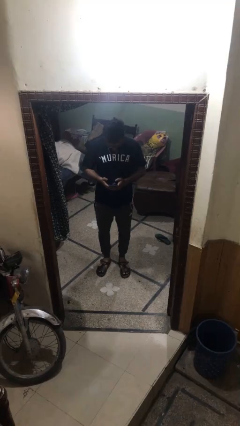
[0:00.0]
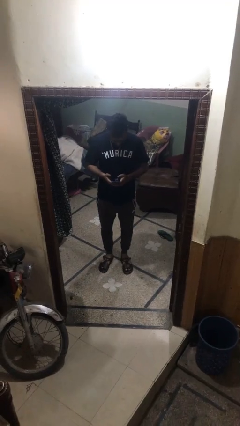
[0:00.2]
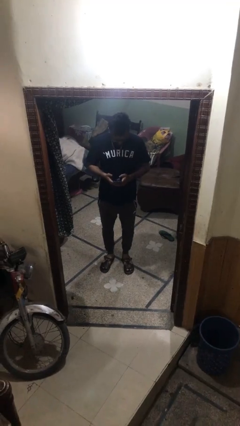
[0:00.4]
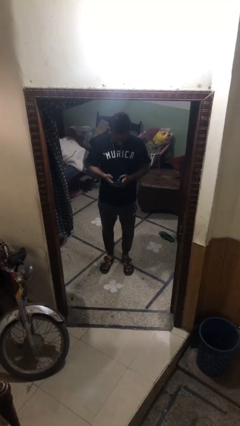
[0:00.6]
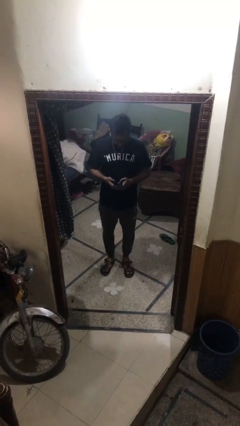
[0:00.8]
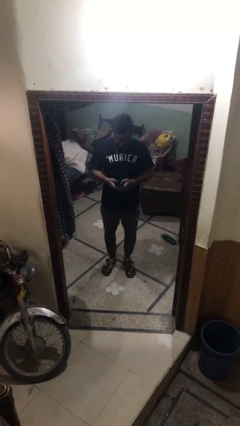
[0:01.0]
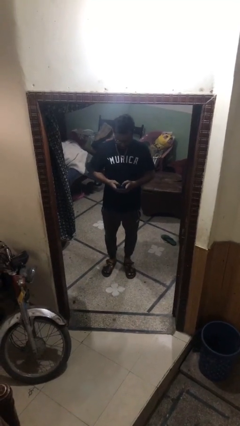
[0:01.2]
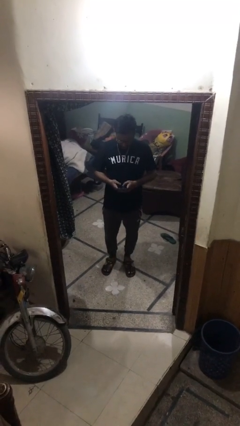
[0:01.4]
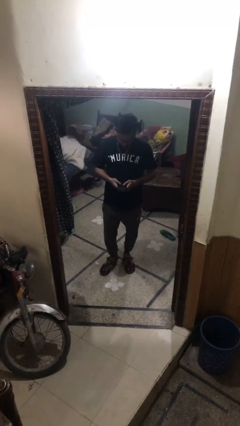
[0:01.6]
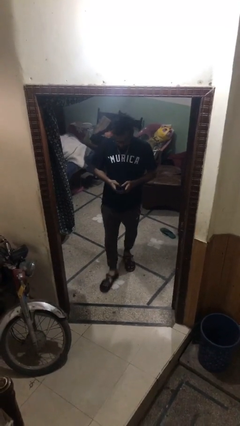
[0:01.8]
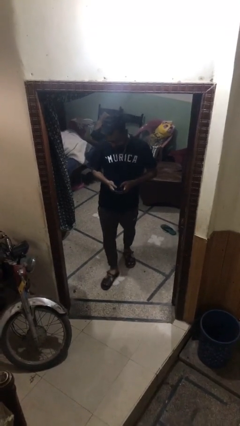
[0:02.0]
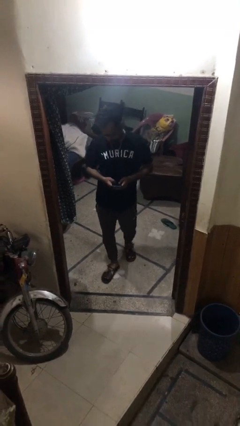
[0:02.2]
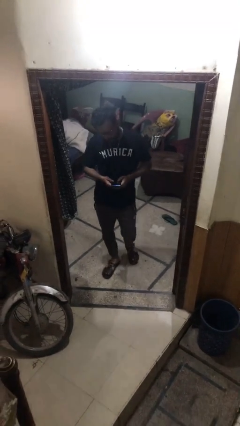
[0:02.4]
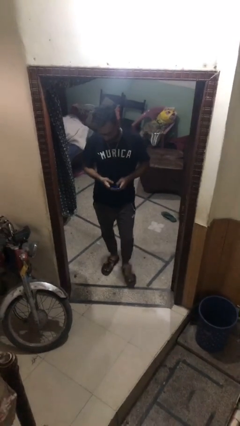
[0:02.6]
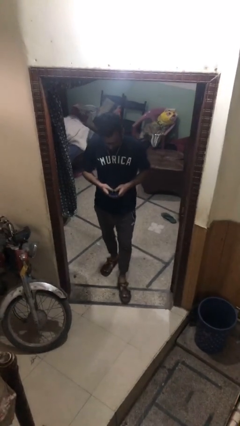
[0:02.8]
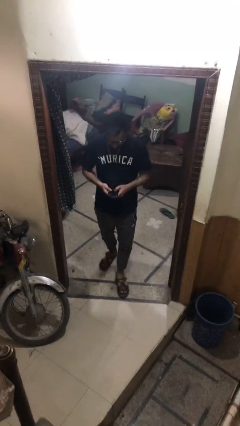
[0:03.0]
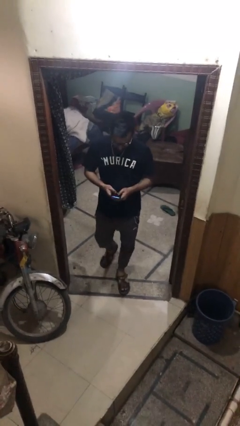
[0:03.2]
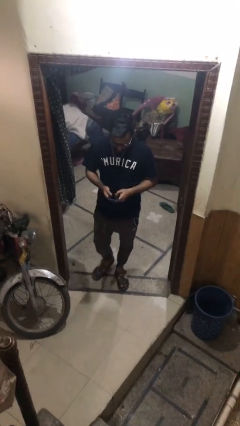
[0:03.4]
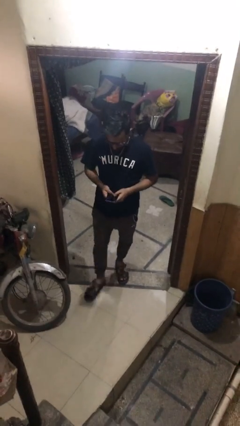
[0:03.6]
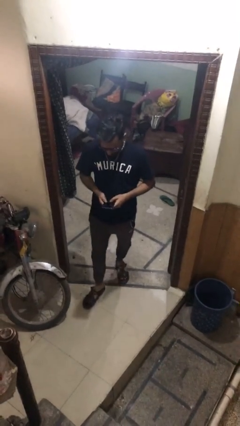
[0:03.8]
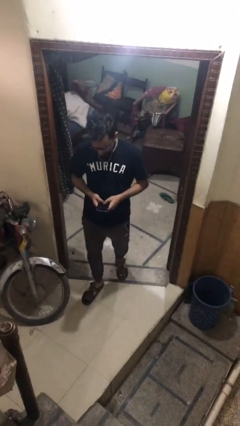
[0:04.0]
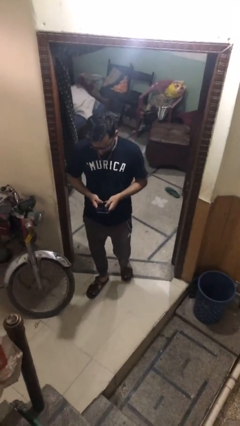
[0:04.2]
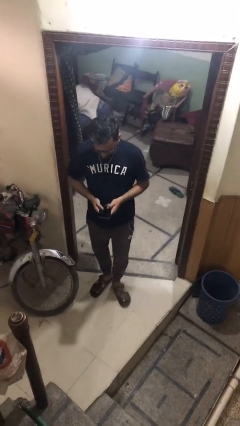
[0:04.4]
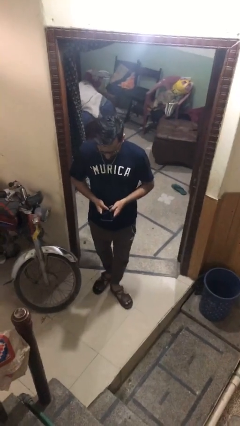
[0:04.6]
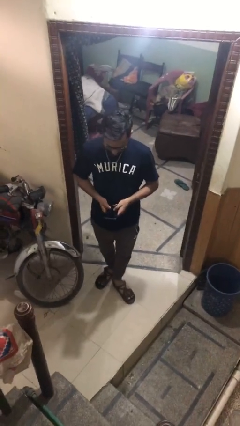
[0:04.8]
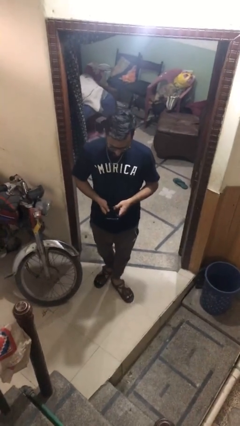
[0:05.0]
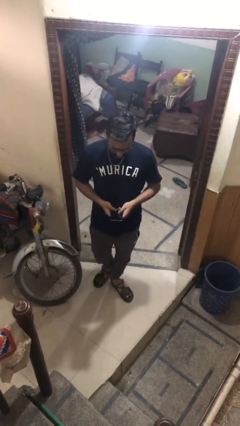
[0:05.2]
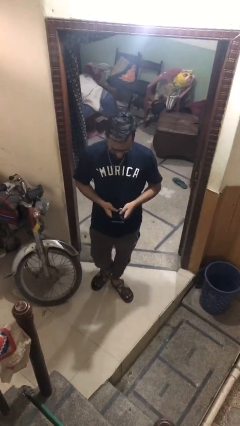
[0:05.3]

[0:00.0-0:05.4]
person enters scene through structure

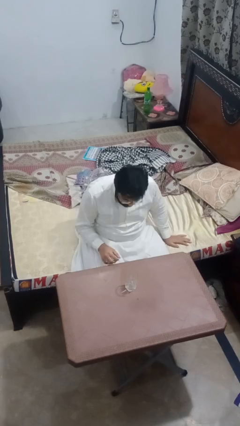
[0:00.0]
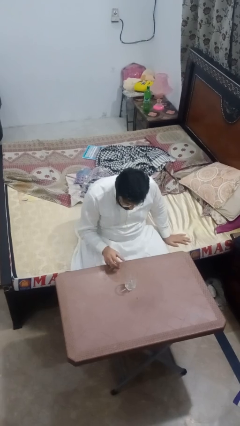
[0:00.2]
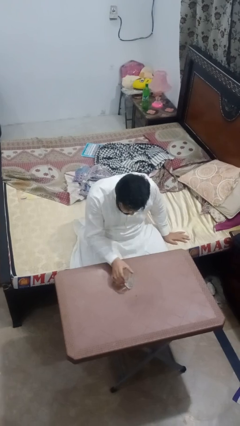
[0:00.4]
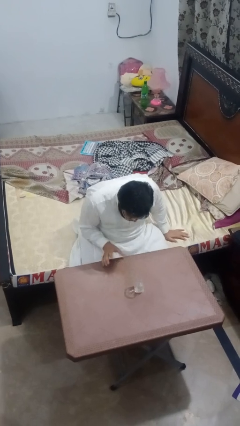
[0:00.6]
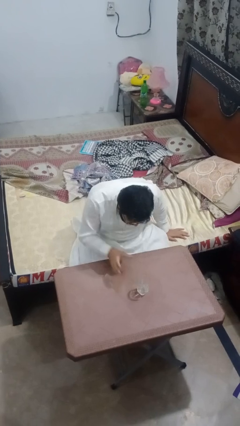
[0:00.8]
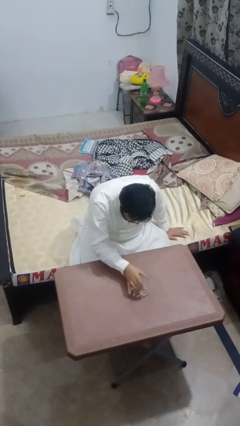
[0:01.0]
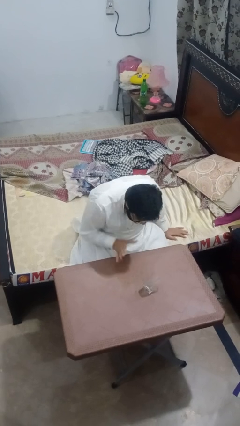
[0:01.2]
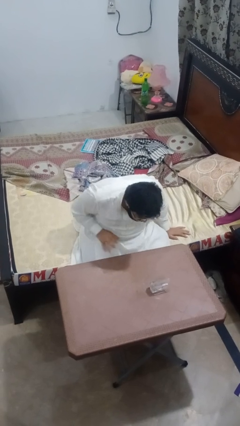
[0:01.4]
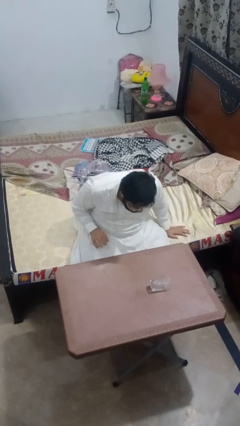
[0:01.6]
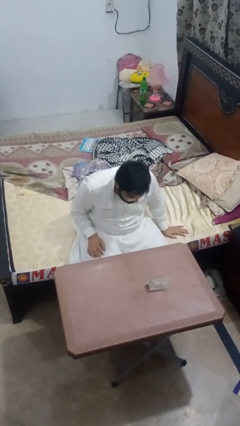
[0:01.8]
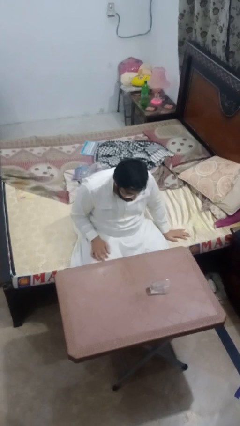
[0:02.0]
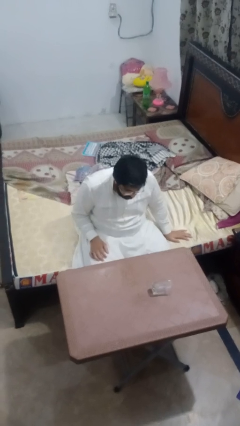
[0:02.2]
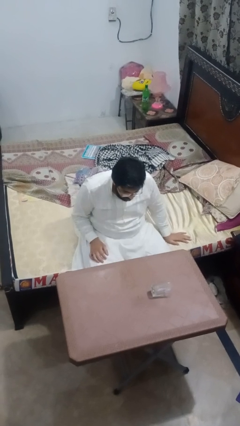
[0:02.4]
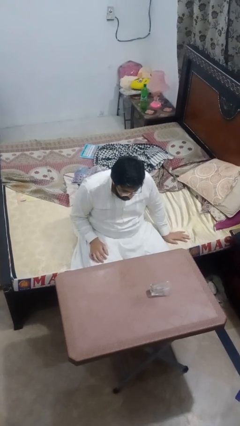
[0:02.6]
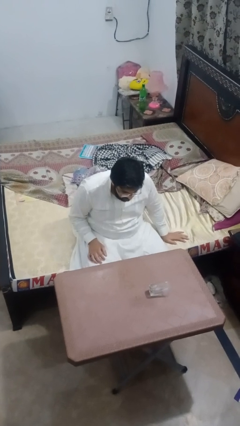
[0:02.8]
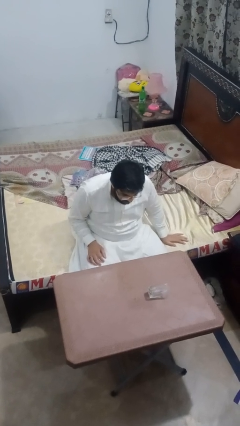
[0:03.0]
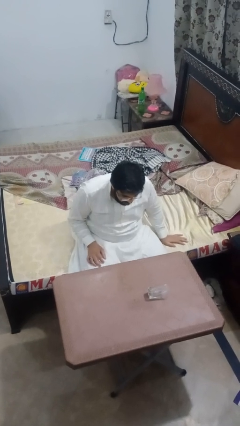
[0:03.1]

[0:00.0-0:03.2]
person knocks over glass

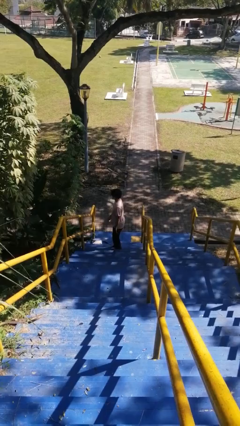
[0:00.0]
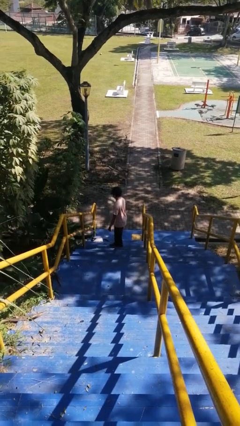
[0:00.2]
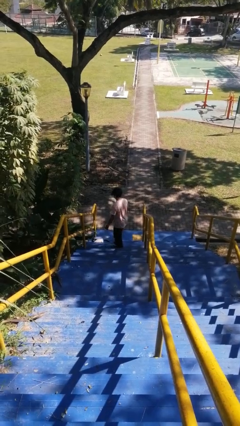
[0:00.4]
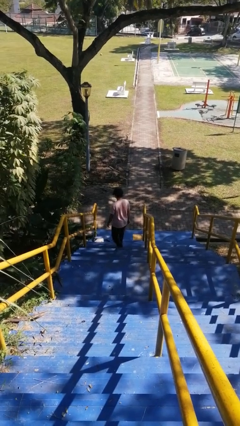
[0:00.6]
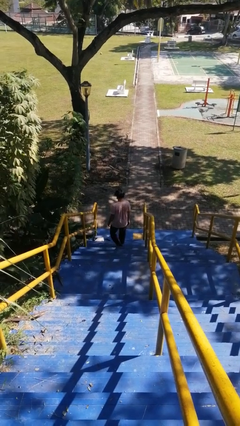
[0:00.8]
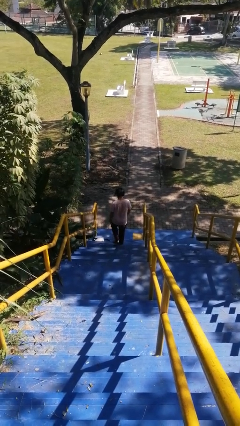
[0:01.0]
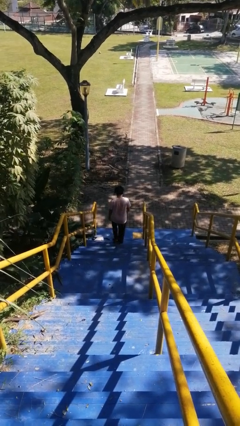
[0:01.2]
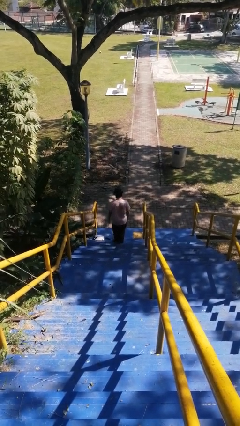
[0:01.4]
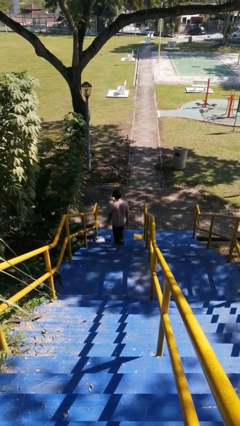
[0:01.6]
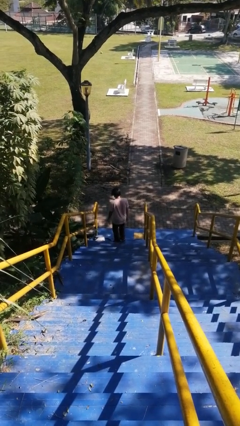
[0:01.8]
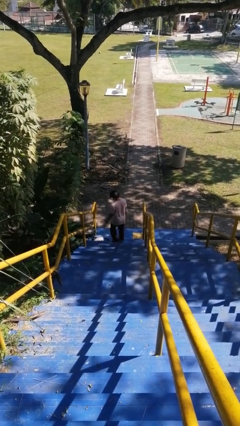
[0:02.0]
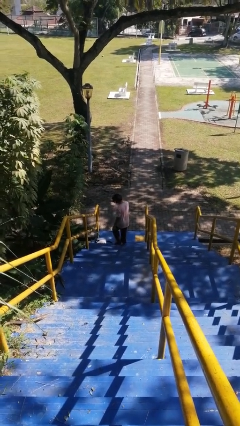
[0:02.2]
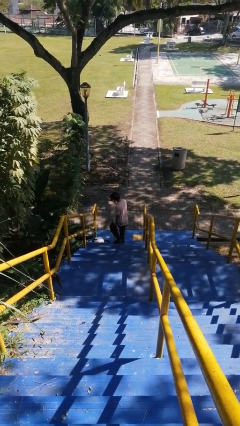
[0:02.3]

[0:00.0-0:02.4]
person climbs down stairs

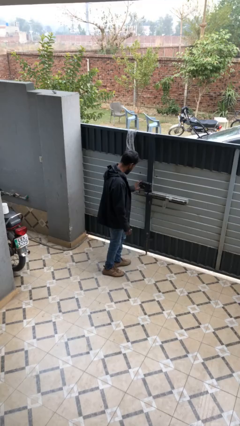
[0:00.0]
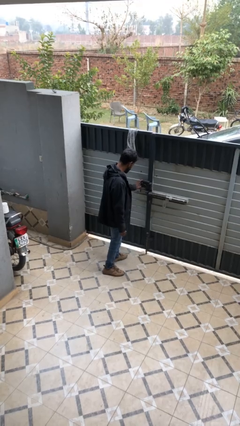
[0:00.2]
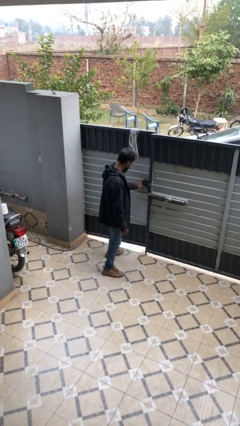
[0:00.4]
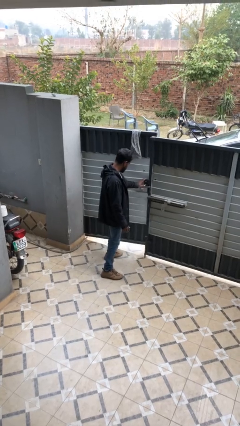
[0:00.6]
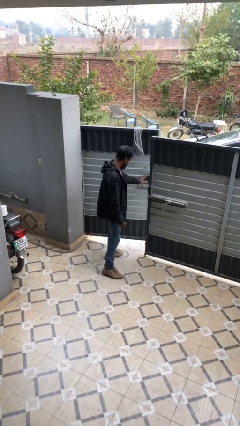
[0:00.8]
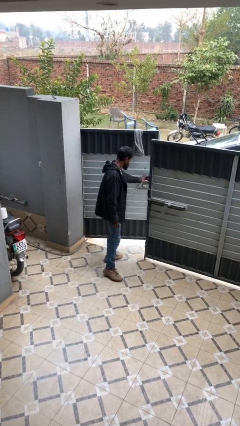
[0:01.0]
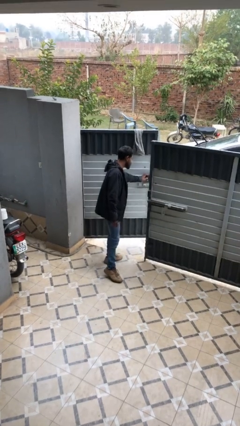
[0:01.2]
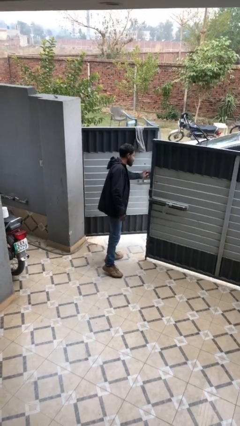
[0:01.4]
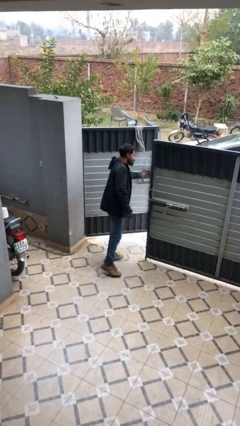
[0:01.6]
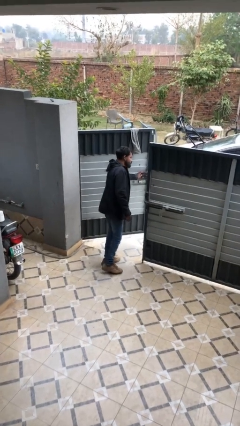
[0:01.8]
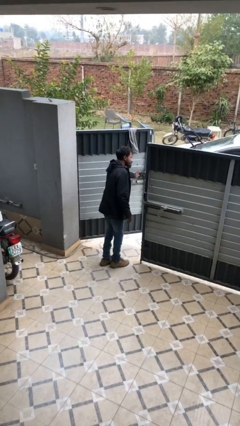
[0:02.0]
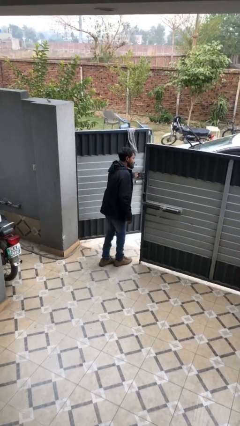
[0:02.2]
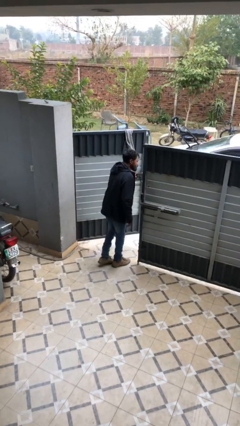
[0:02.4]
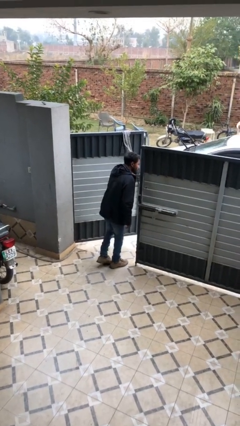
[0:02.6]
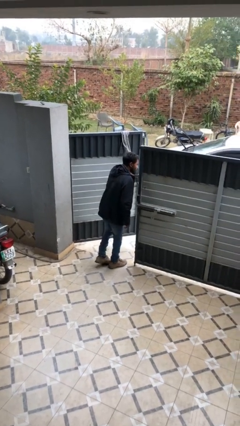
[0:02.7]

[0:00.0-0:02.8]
person opens facility door

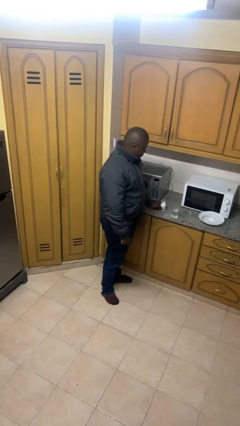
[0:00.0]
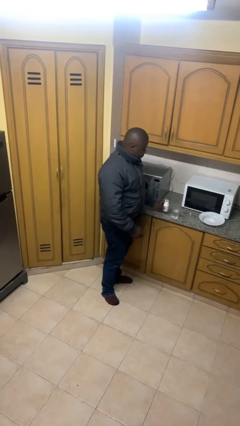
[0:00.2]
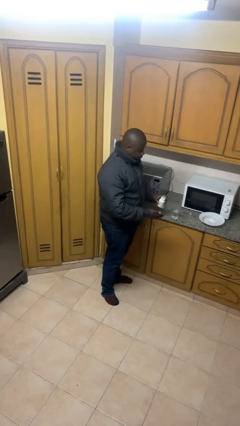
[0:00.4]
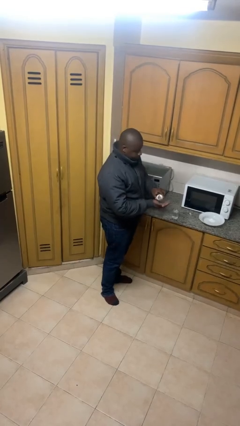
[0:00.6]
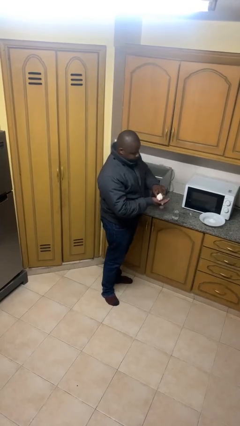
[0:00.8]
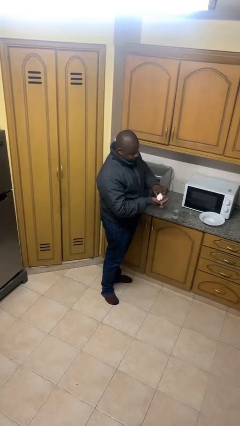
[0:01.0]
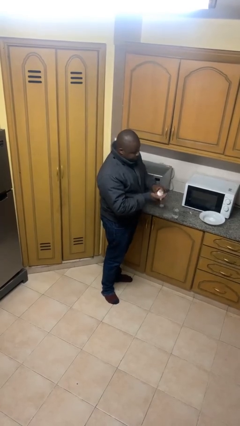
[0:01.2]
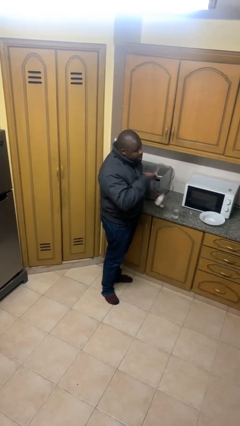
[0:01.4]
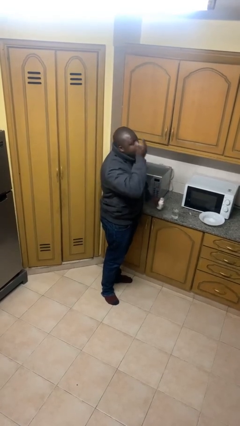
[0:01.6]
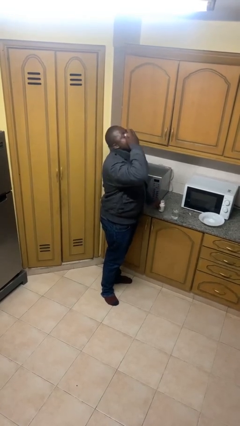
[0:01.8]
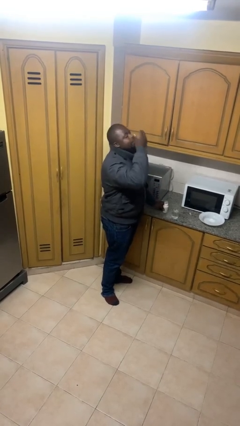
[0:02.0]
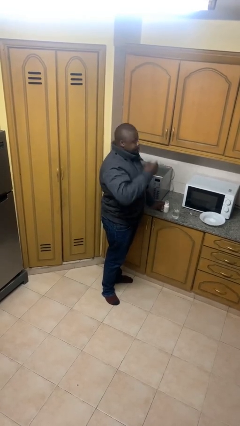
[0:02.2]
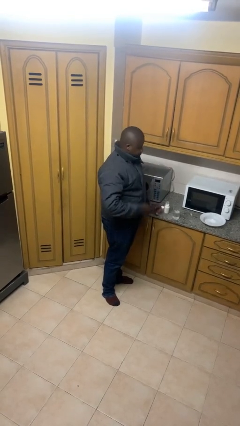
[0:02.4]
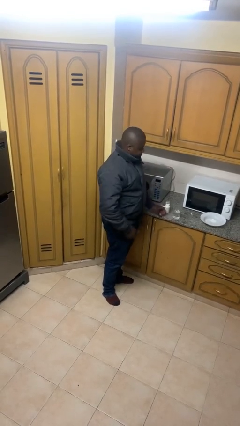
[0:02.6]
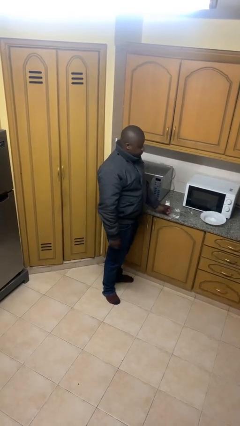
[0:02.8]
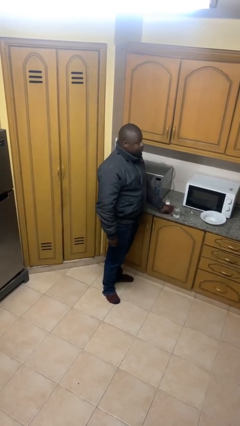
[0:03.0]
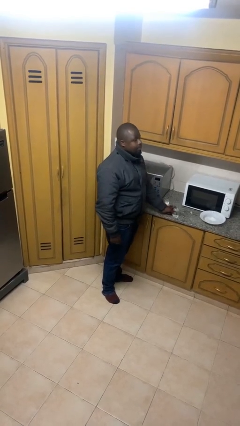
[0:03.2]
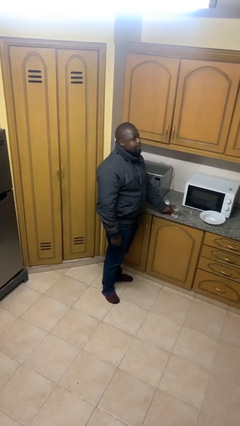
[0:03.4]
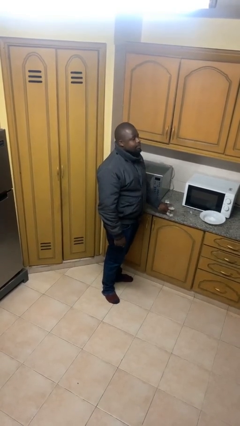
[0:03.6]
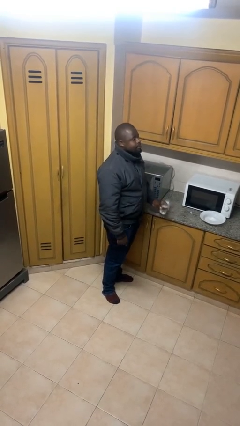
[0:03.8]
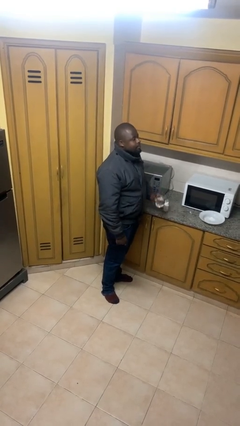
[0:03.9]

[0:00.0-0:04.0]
person takes medicine pills
